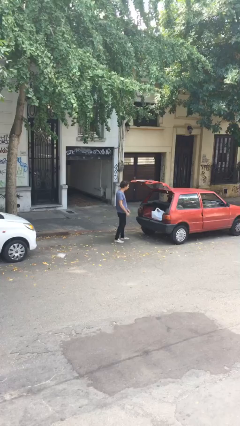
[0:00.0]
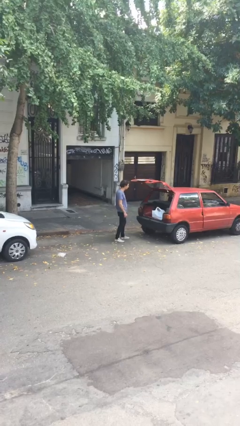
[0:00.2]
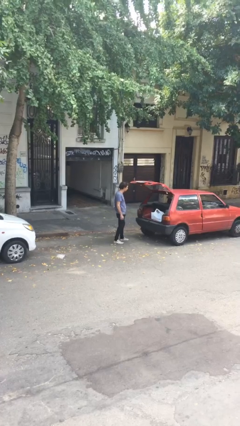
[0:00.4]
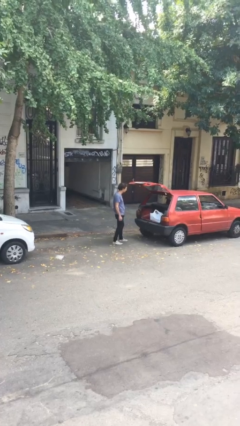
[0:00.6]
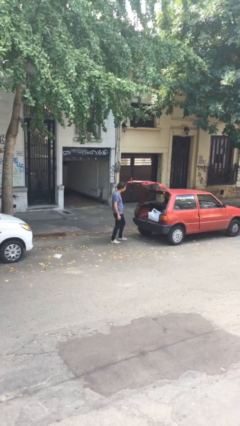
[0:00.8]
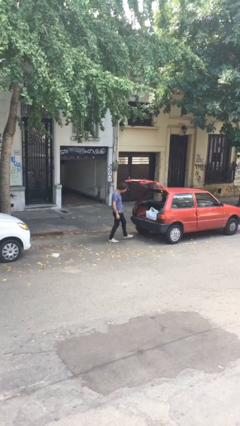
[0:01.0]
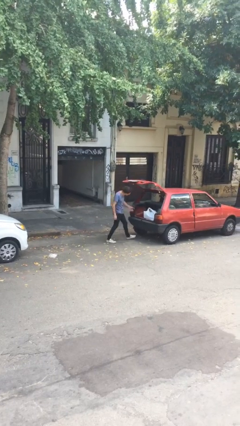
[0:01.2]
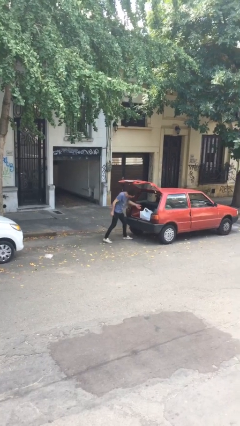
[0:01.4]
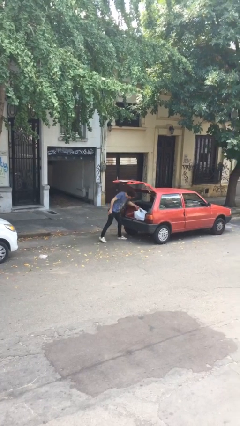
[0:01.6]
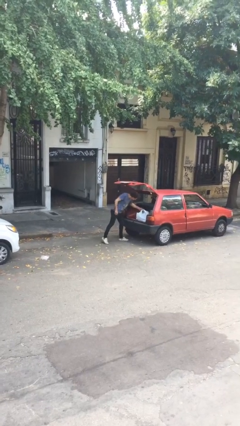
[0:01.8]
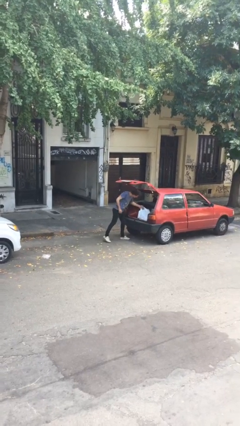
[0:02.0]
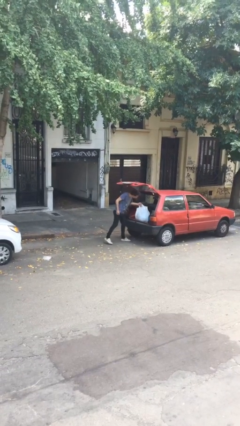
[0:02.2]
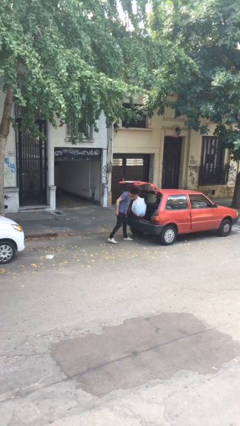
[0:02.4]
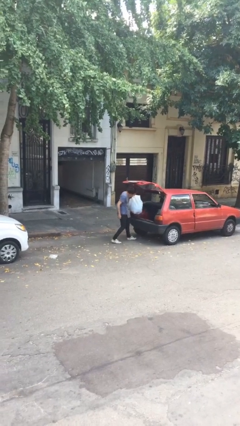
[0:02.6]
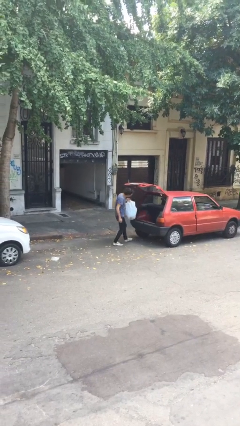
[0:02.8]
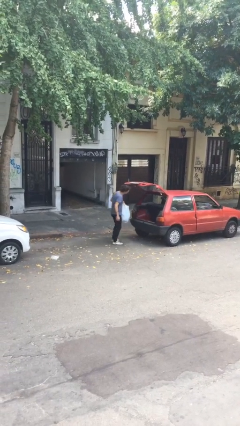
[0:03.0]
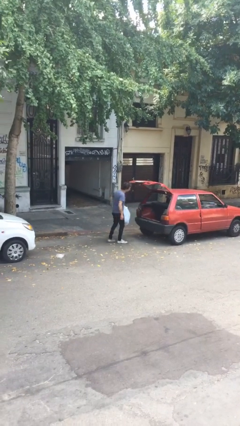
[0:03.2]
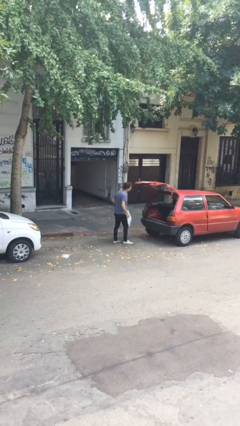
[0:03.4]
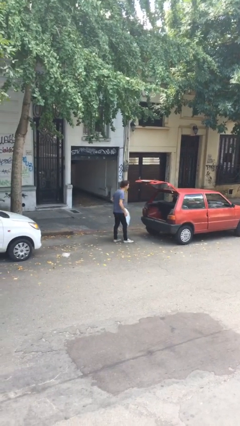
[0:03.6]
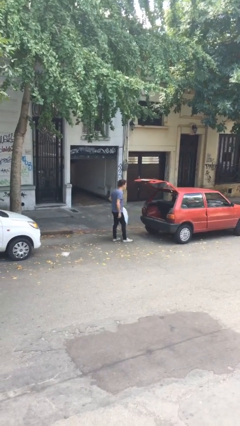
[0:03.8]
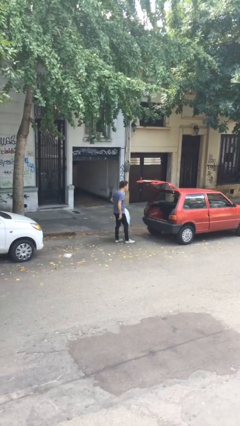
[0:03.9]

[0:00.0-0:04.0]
person unloads car

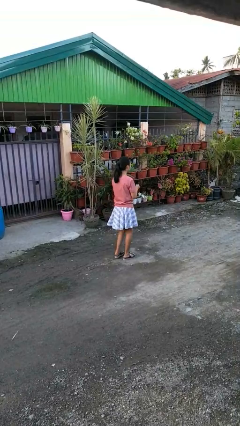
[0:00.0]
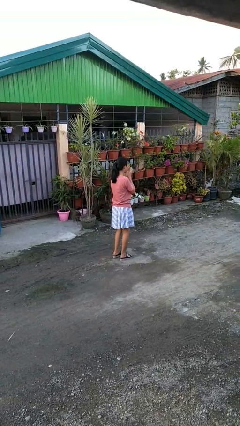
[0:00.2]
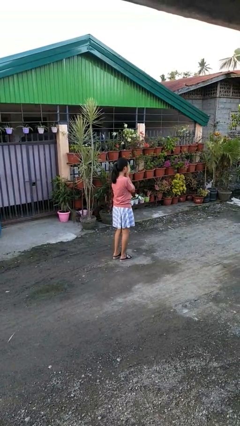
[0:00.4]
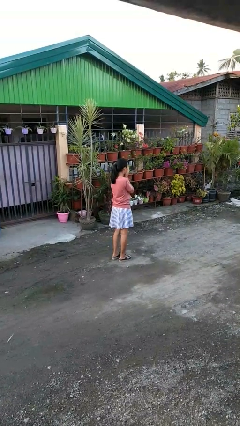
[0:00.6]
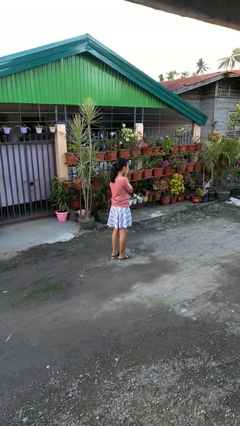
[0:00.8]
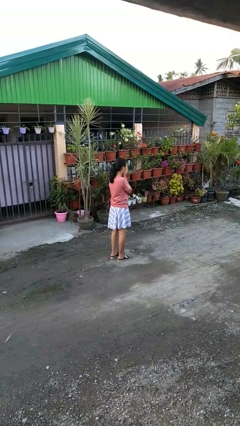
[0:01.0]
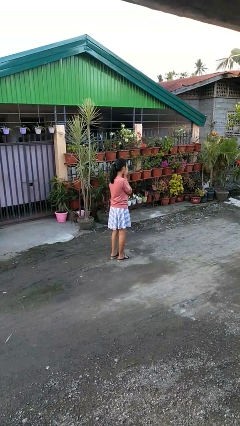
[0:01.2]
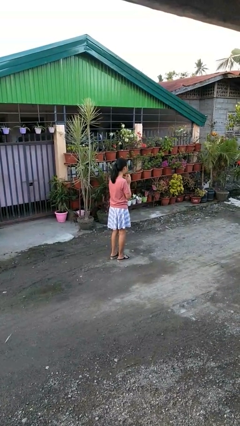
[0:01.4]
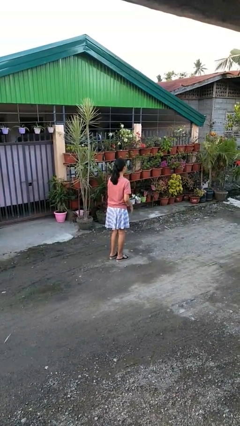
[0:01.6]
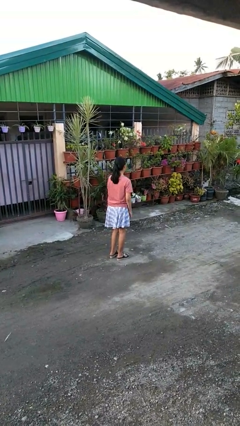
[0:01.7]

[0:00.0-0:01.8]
person blows into hands

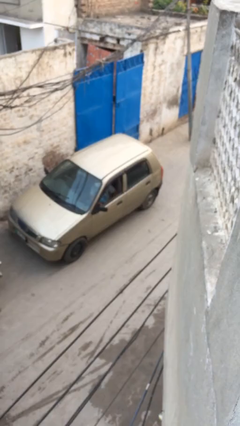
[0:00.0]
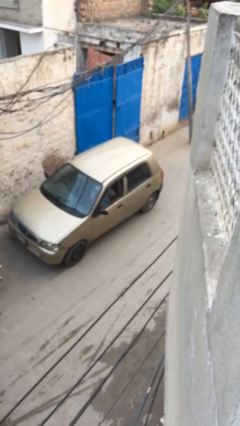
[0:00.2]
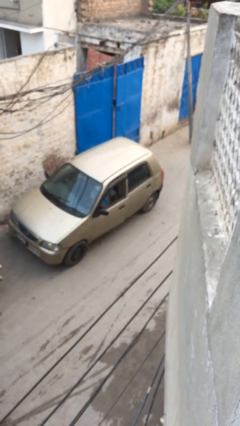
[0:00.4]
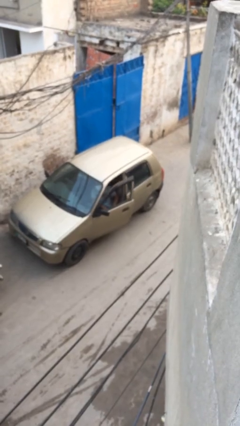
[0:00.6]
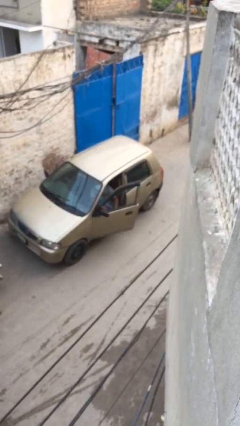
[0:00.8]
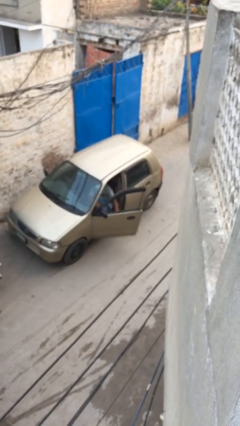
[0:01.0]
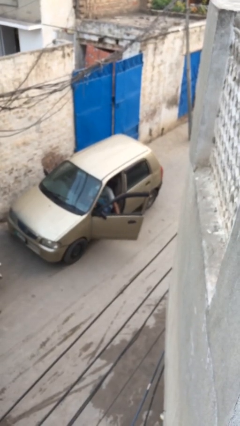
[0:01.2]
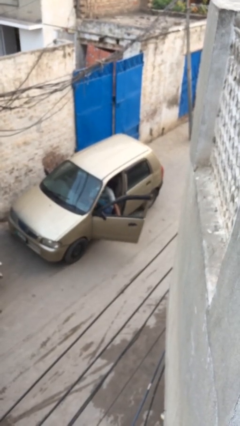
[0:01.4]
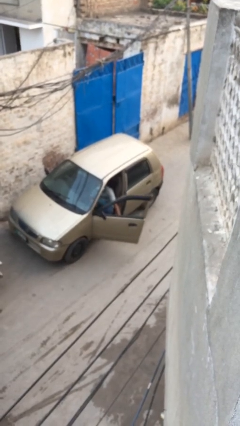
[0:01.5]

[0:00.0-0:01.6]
person opens car door

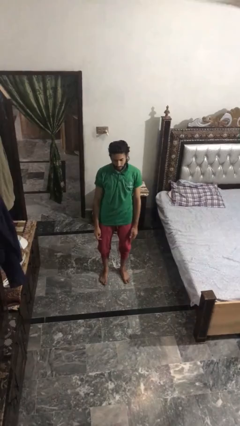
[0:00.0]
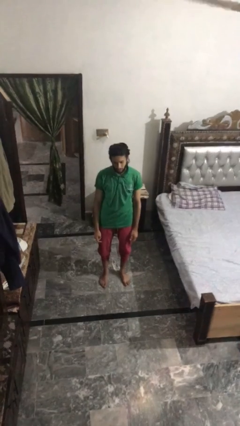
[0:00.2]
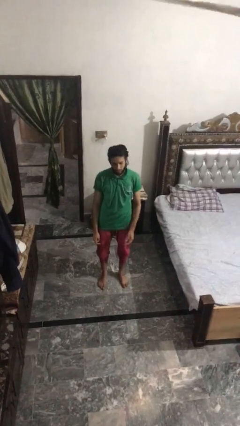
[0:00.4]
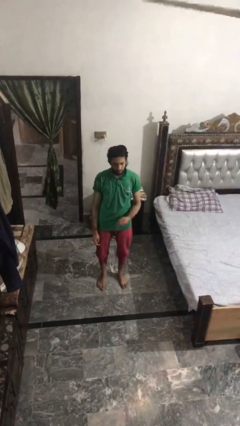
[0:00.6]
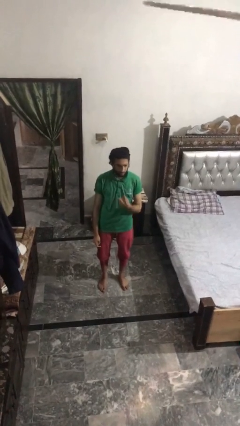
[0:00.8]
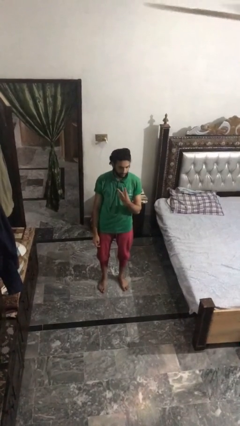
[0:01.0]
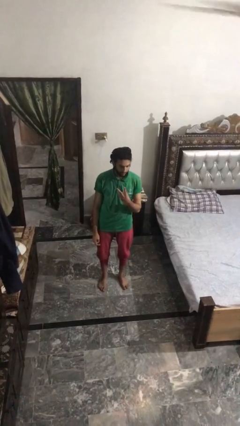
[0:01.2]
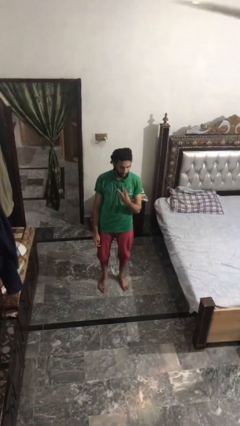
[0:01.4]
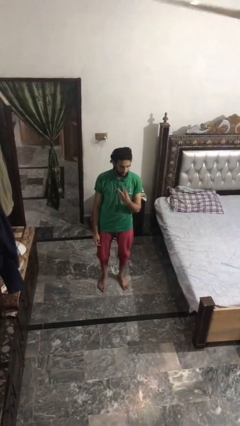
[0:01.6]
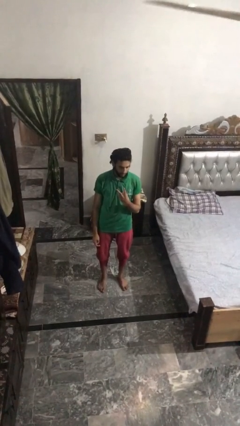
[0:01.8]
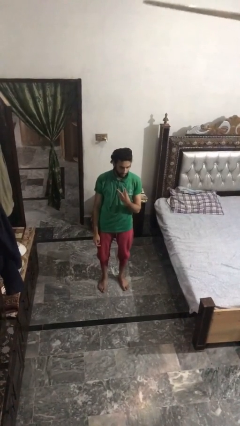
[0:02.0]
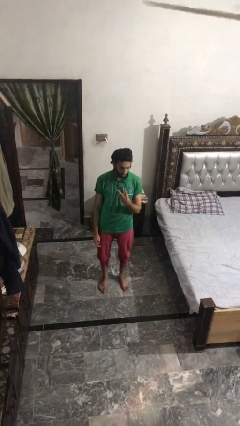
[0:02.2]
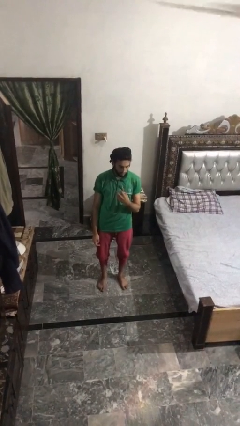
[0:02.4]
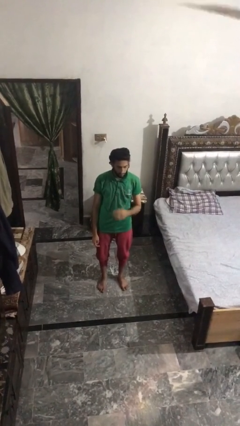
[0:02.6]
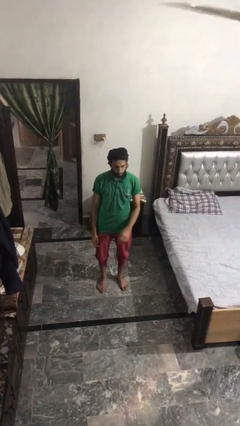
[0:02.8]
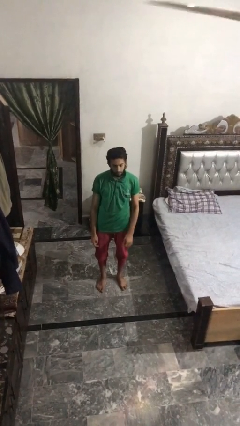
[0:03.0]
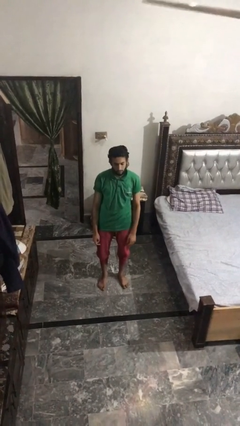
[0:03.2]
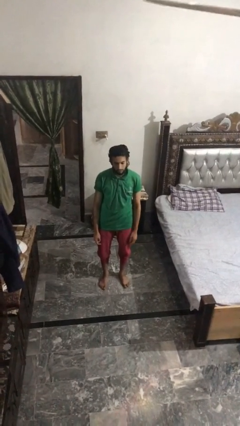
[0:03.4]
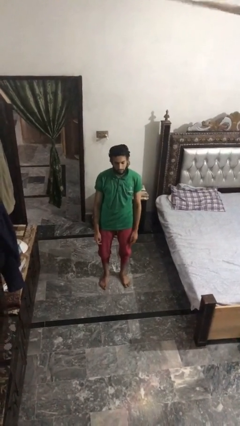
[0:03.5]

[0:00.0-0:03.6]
person gestures peace

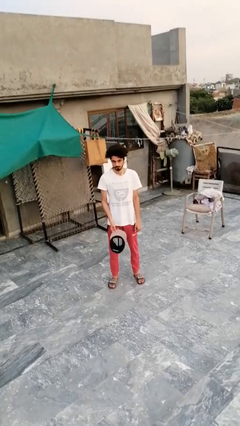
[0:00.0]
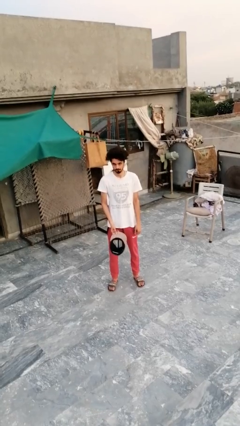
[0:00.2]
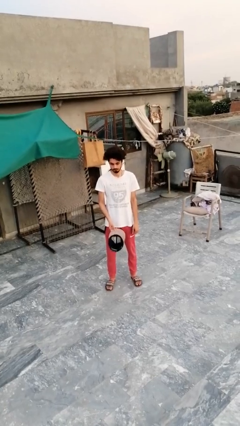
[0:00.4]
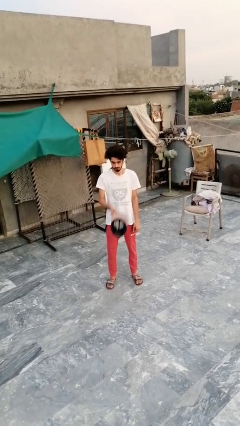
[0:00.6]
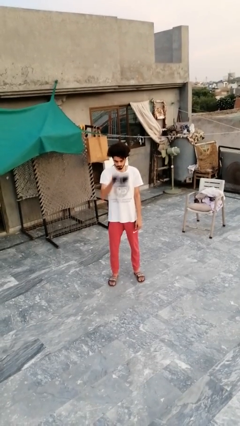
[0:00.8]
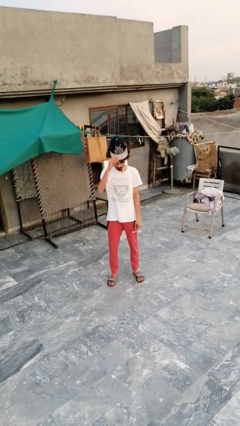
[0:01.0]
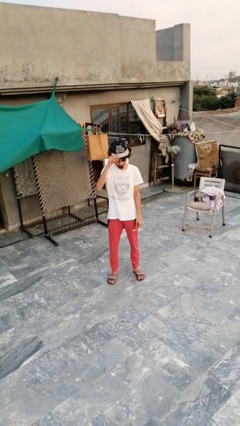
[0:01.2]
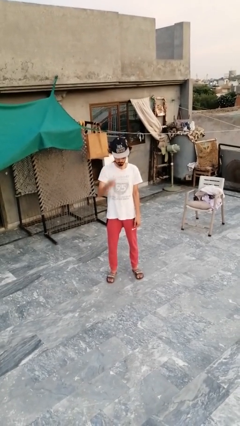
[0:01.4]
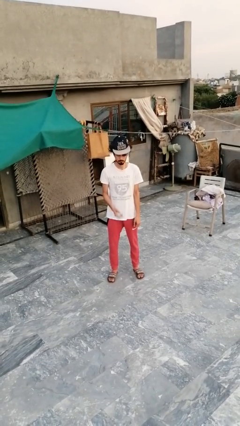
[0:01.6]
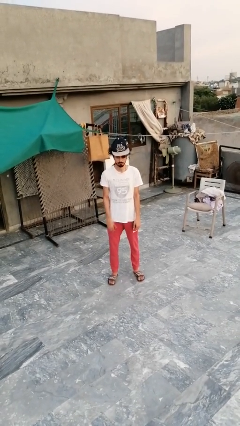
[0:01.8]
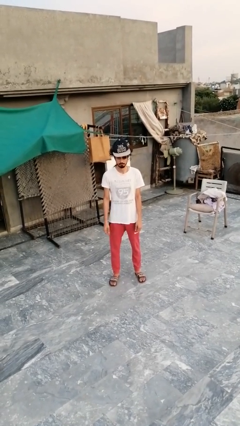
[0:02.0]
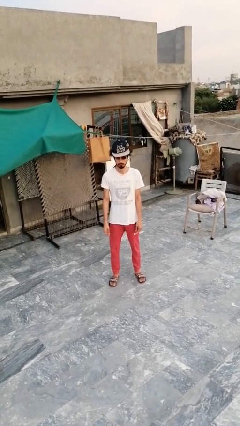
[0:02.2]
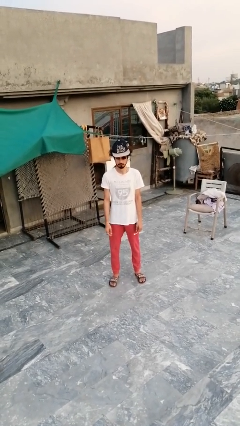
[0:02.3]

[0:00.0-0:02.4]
person puts on hat

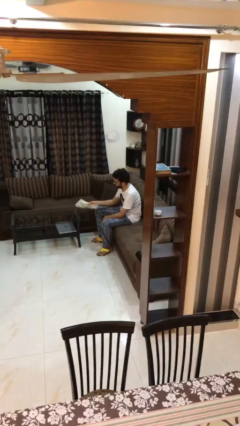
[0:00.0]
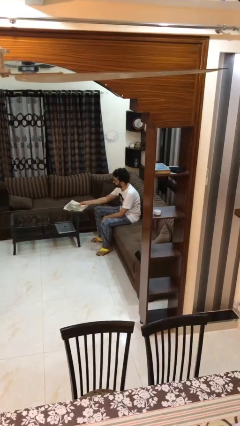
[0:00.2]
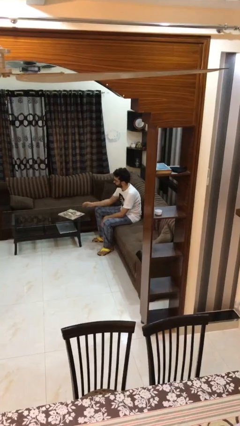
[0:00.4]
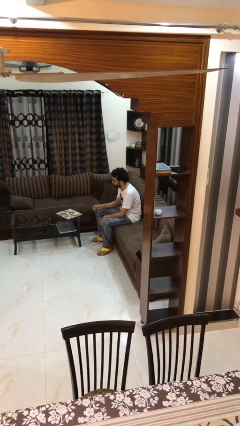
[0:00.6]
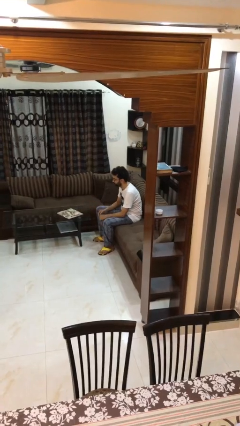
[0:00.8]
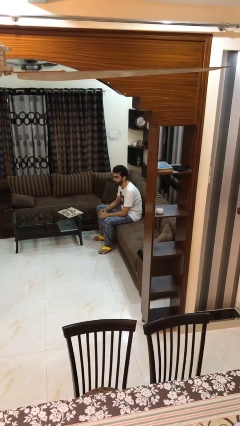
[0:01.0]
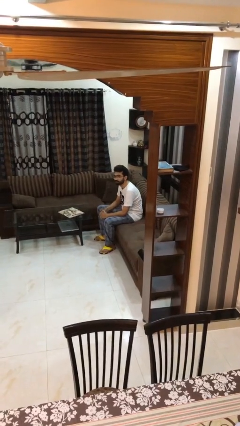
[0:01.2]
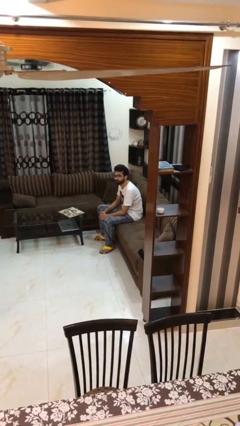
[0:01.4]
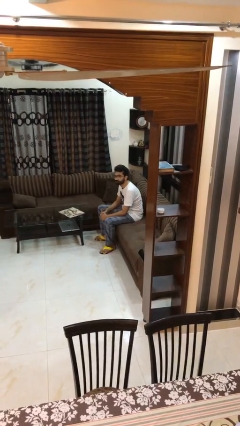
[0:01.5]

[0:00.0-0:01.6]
person puts down object on table

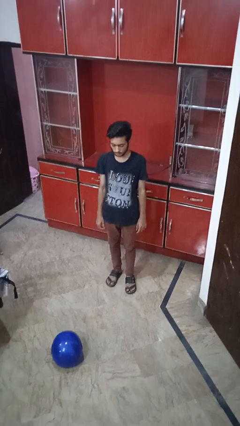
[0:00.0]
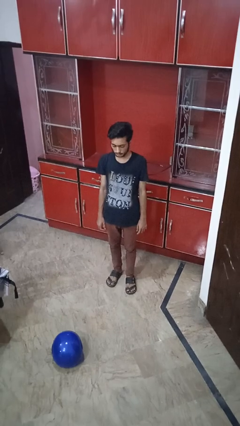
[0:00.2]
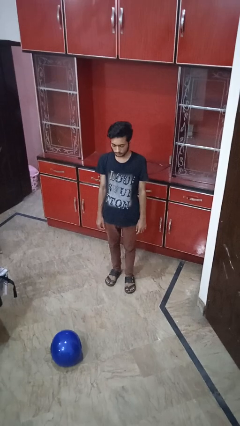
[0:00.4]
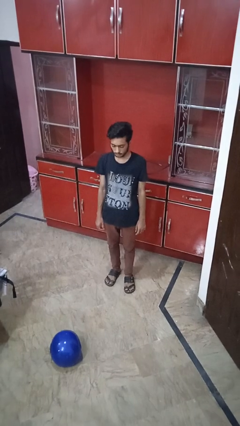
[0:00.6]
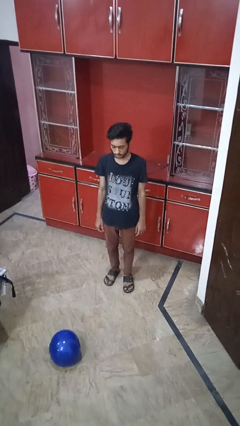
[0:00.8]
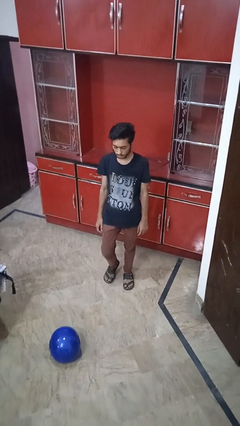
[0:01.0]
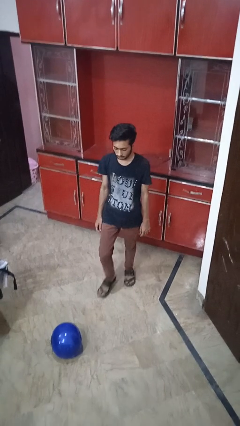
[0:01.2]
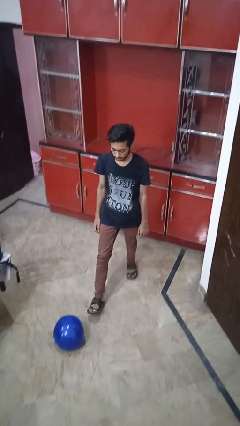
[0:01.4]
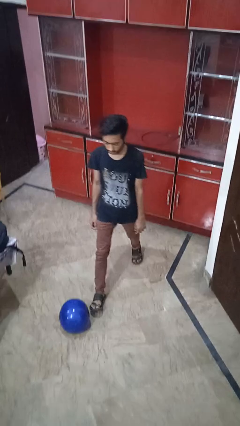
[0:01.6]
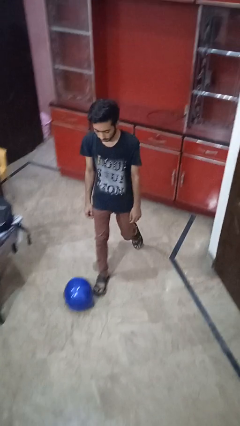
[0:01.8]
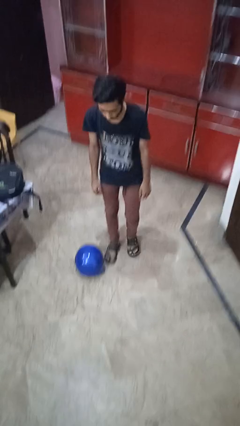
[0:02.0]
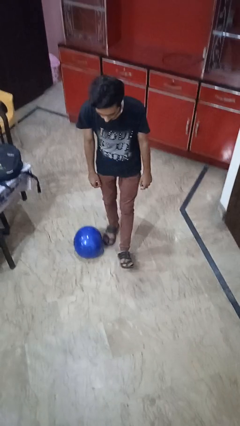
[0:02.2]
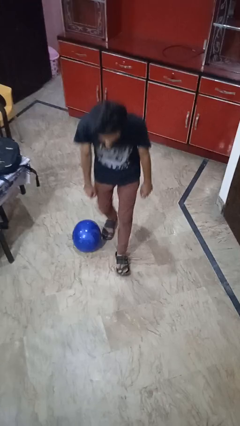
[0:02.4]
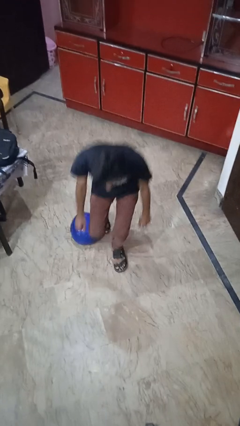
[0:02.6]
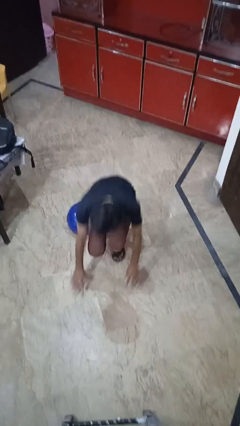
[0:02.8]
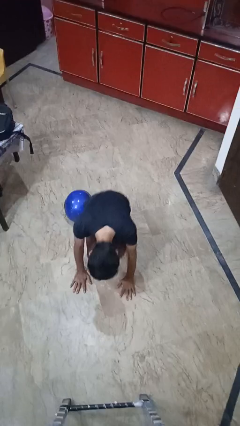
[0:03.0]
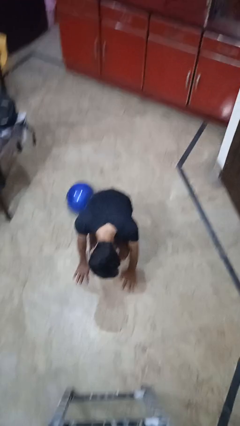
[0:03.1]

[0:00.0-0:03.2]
person puts phone into pocket
